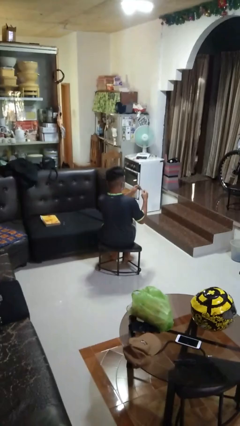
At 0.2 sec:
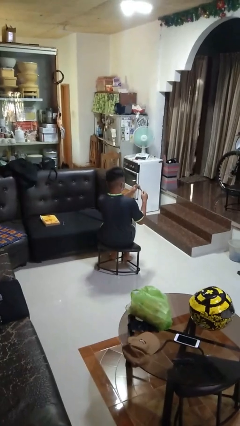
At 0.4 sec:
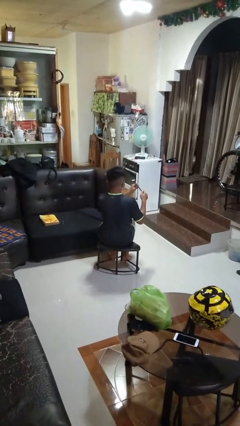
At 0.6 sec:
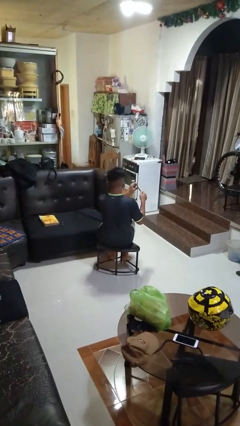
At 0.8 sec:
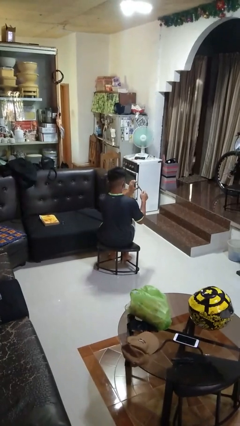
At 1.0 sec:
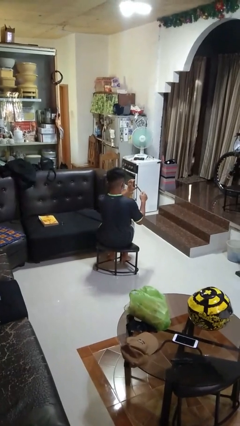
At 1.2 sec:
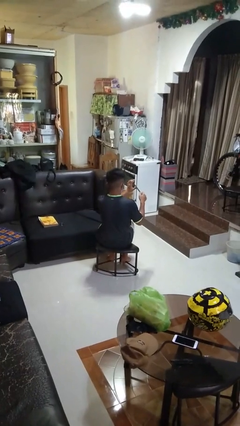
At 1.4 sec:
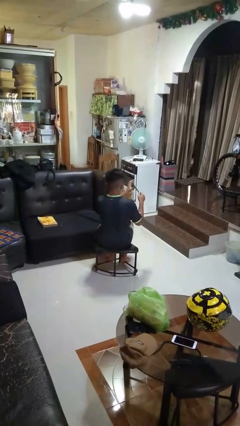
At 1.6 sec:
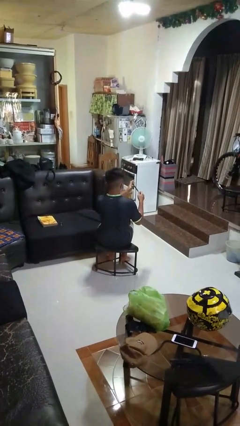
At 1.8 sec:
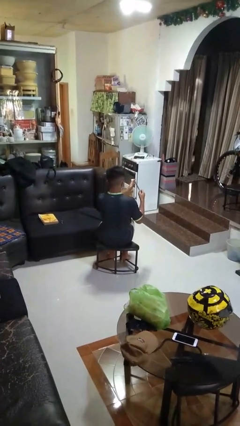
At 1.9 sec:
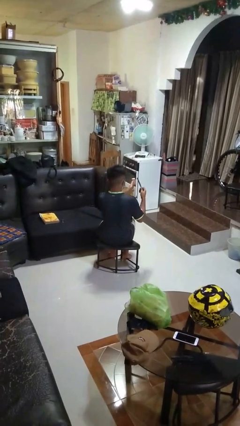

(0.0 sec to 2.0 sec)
person files fingernails

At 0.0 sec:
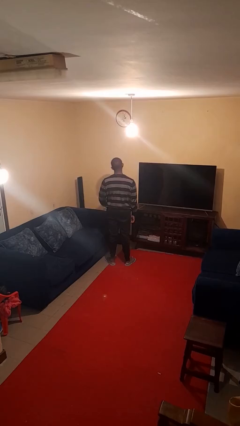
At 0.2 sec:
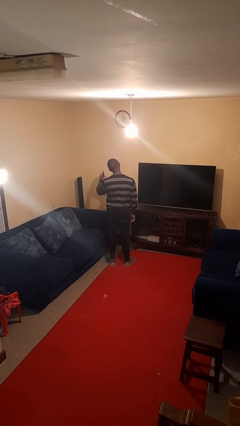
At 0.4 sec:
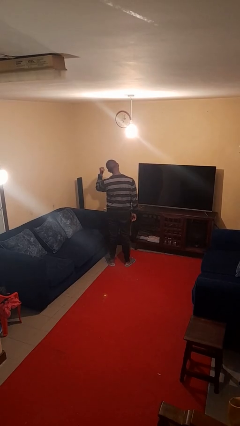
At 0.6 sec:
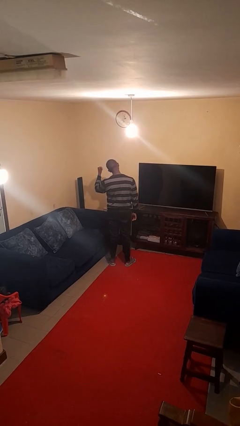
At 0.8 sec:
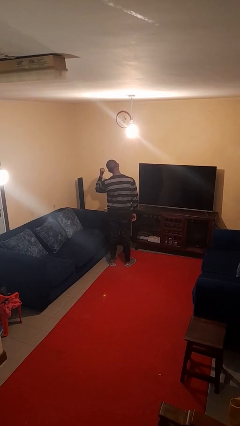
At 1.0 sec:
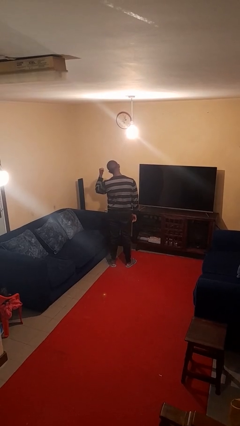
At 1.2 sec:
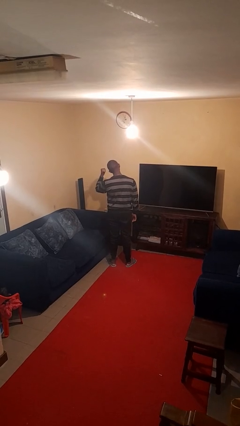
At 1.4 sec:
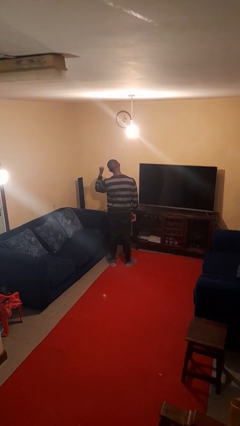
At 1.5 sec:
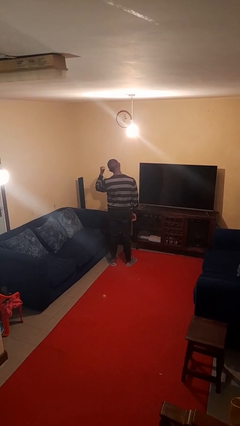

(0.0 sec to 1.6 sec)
person gestures behind me

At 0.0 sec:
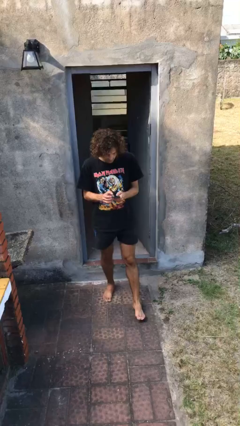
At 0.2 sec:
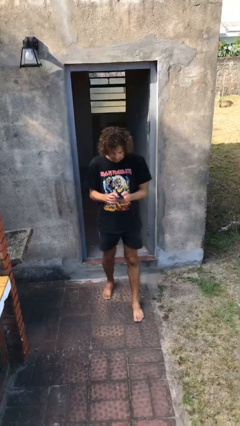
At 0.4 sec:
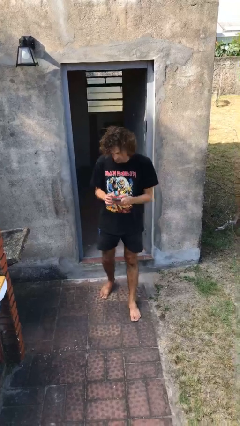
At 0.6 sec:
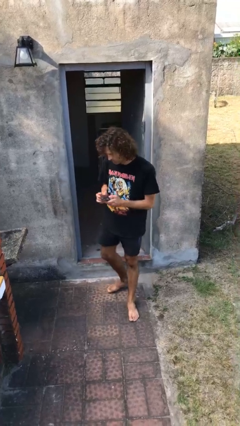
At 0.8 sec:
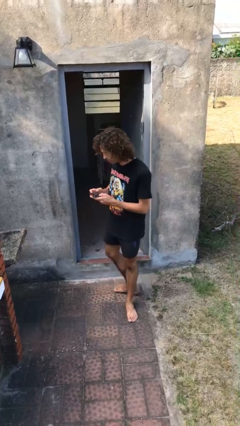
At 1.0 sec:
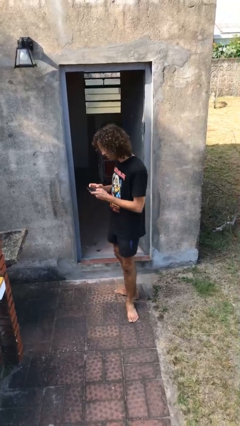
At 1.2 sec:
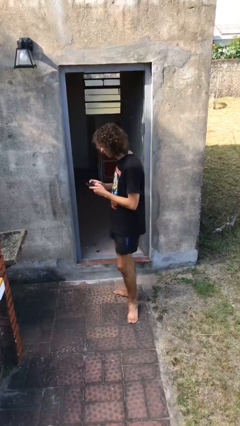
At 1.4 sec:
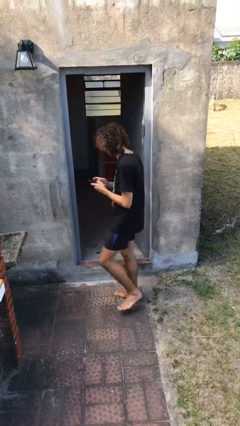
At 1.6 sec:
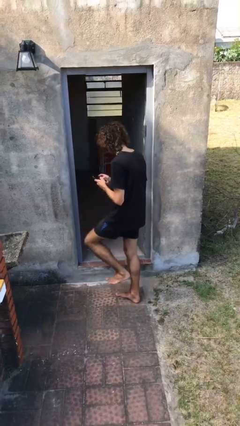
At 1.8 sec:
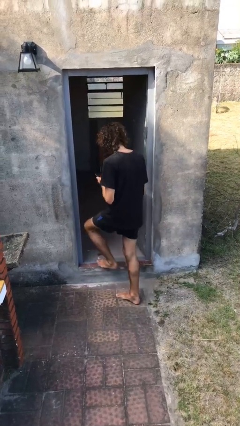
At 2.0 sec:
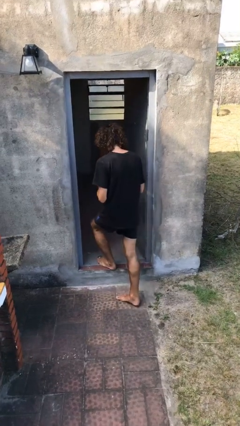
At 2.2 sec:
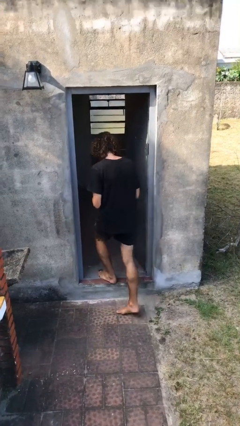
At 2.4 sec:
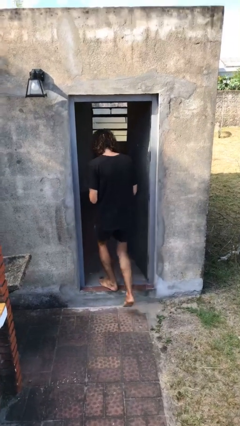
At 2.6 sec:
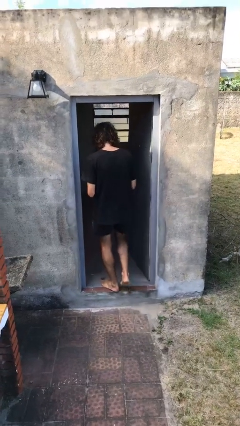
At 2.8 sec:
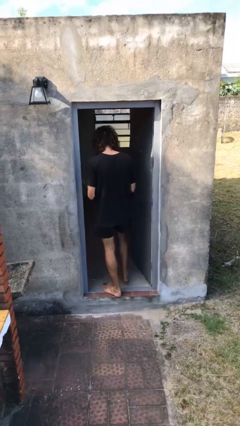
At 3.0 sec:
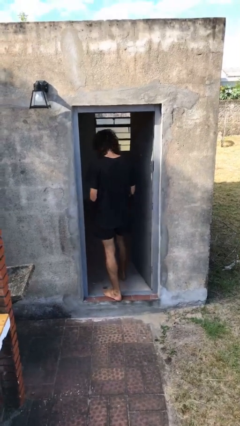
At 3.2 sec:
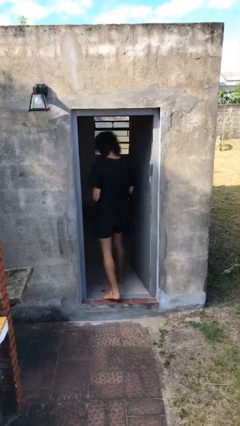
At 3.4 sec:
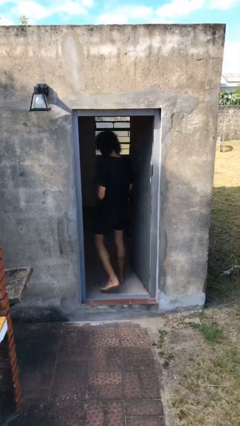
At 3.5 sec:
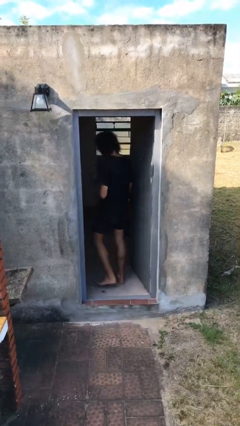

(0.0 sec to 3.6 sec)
person exits scene through structure

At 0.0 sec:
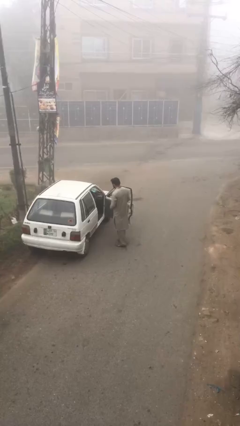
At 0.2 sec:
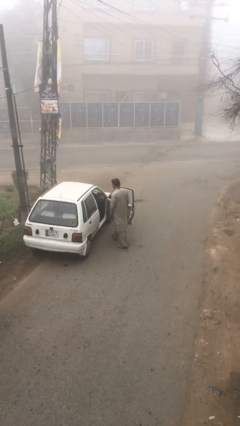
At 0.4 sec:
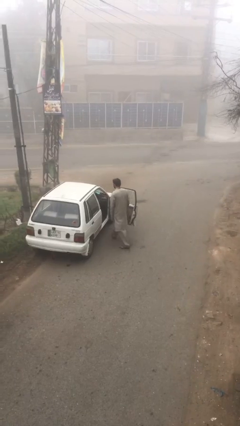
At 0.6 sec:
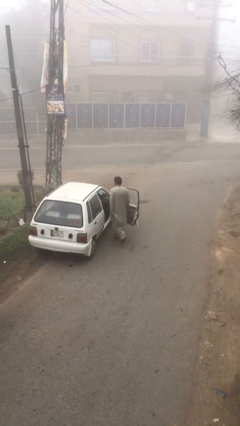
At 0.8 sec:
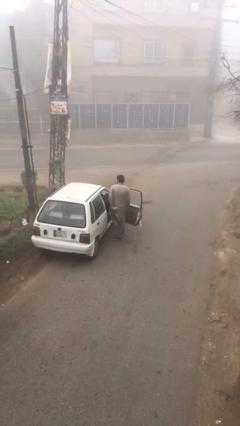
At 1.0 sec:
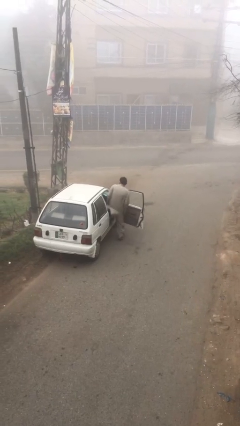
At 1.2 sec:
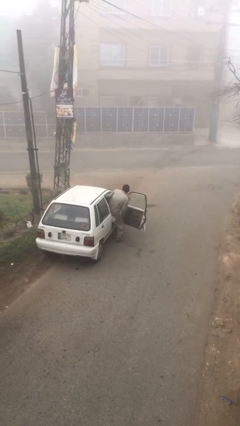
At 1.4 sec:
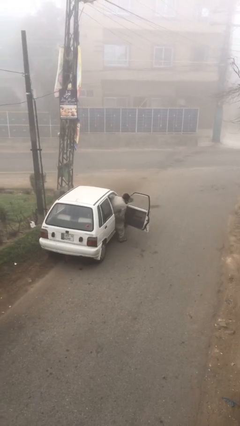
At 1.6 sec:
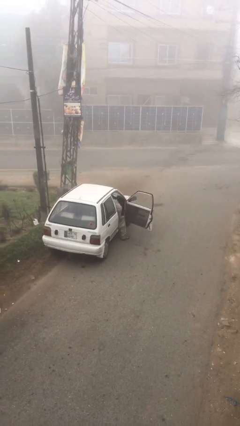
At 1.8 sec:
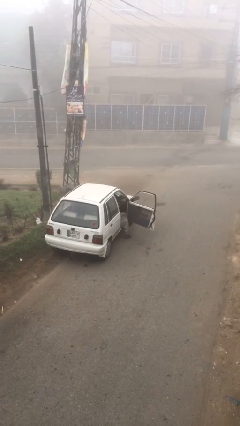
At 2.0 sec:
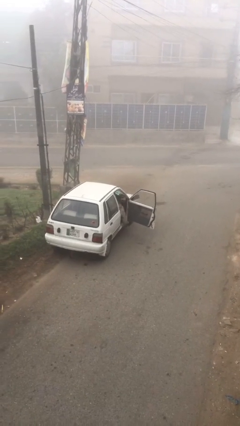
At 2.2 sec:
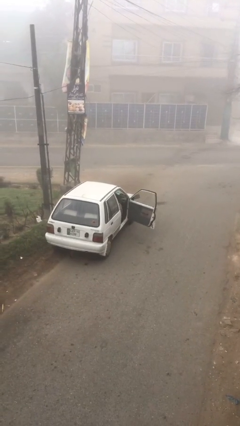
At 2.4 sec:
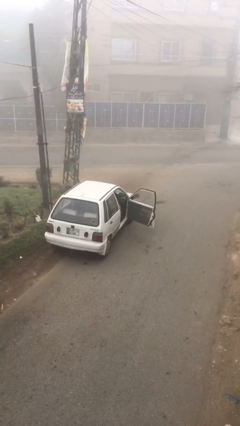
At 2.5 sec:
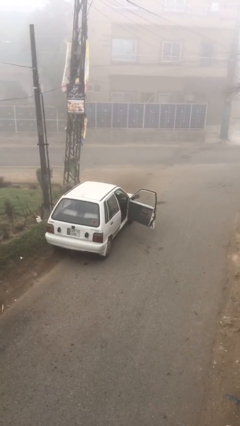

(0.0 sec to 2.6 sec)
person enters car

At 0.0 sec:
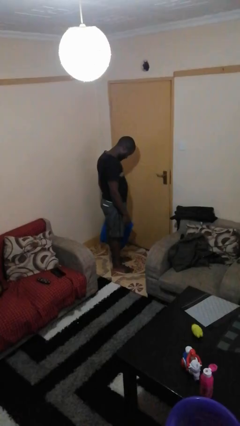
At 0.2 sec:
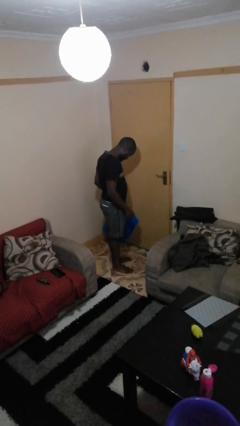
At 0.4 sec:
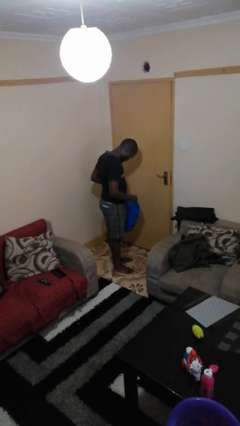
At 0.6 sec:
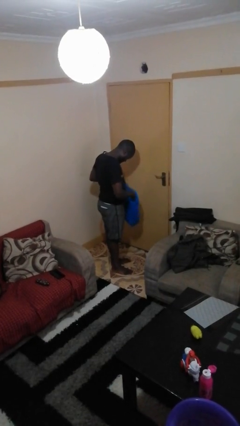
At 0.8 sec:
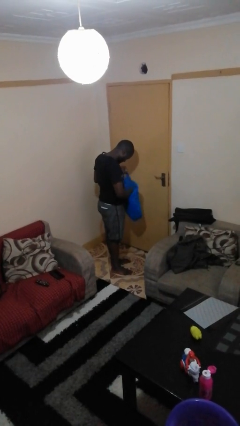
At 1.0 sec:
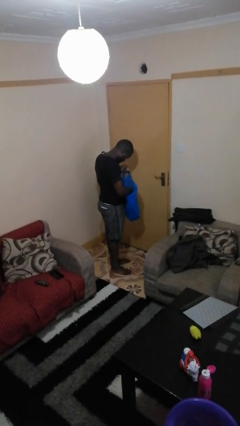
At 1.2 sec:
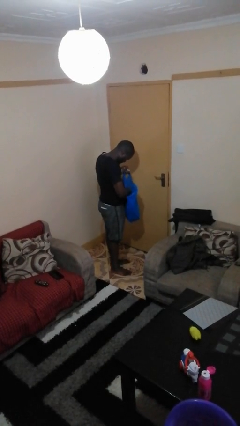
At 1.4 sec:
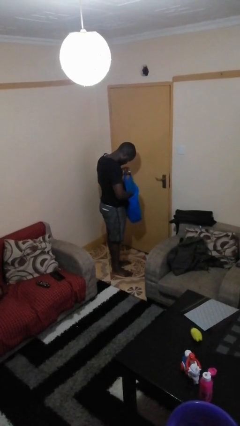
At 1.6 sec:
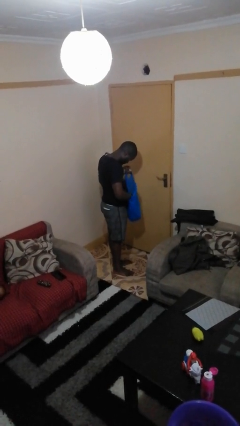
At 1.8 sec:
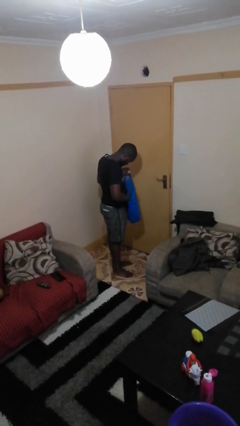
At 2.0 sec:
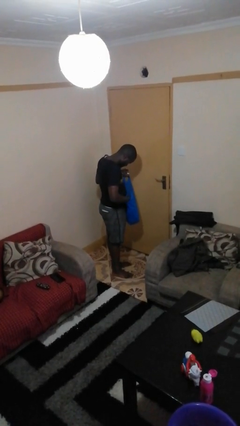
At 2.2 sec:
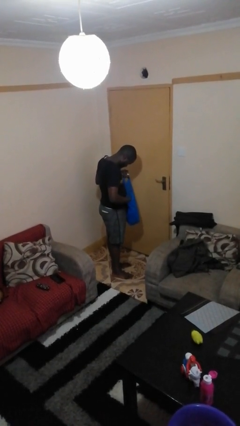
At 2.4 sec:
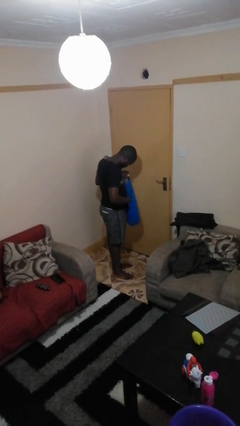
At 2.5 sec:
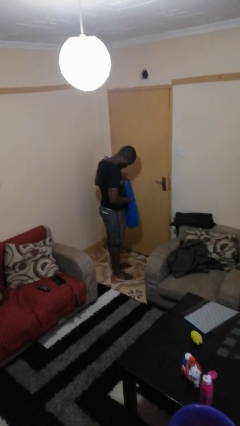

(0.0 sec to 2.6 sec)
person searches in bag

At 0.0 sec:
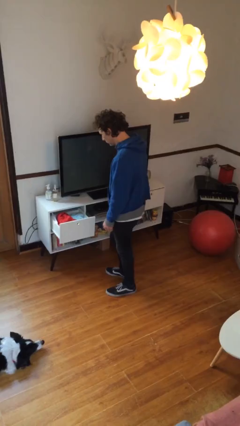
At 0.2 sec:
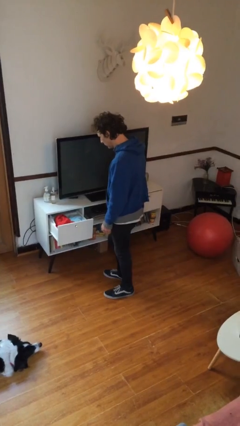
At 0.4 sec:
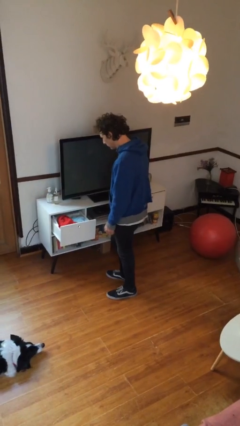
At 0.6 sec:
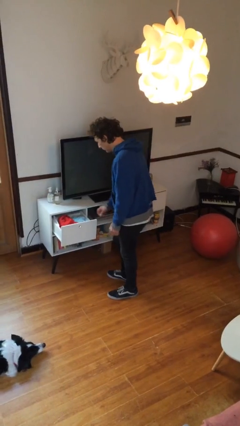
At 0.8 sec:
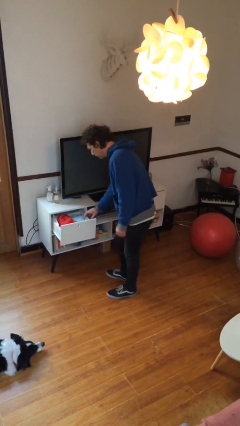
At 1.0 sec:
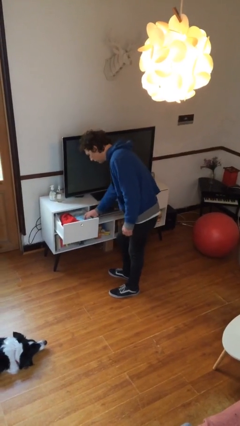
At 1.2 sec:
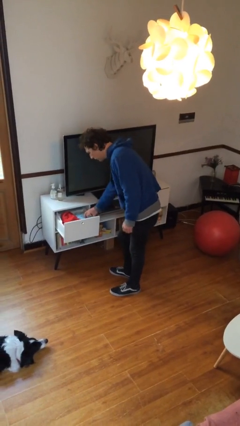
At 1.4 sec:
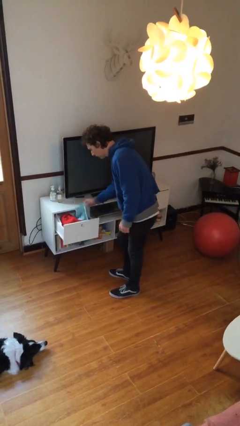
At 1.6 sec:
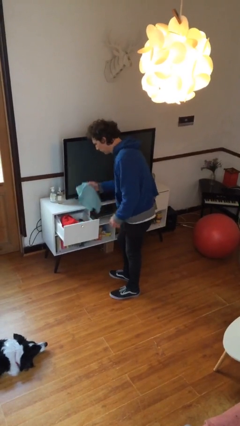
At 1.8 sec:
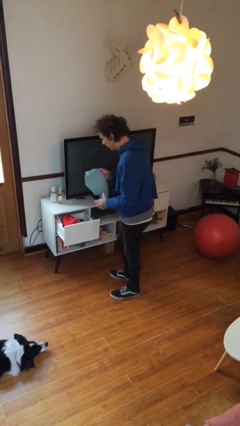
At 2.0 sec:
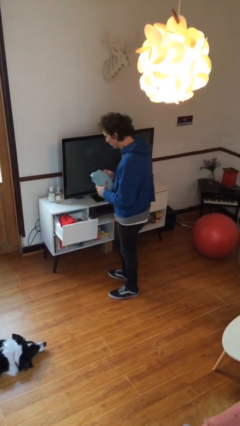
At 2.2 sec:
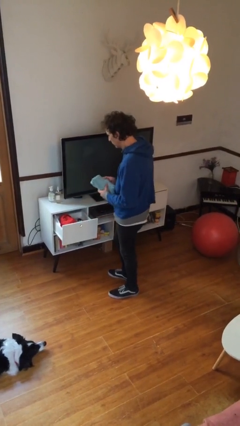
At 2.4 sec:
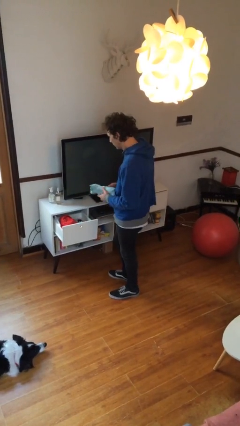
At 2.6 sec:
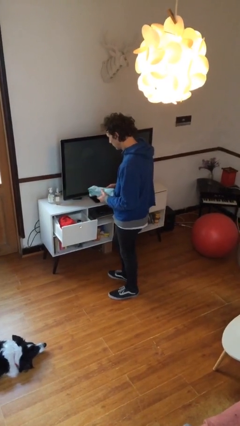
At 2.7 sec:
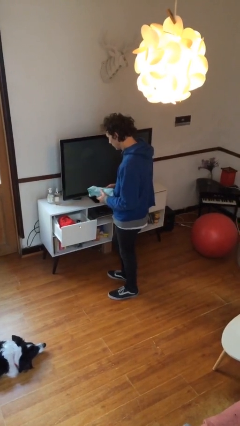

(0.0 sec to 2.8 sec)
person takes clothes from dresser

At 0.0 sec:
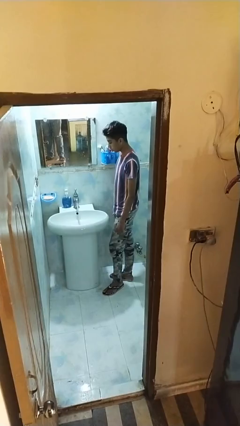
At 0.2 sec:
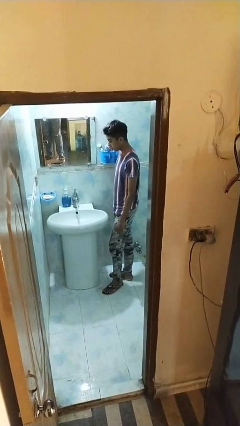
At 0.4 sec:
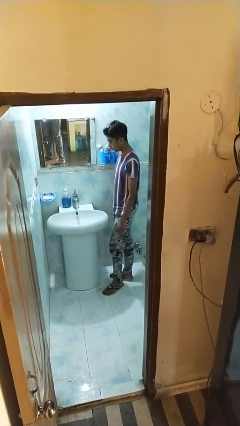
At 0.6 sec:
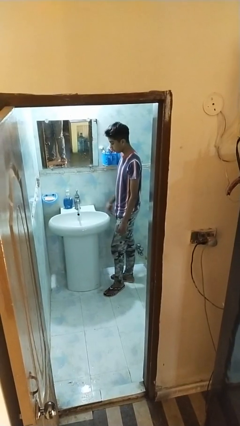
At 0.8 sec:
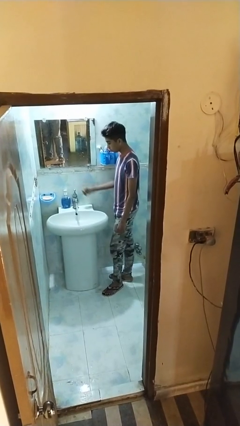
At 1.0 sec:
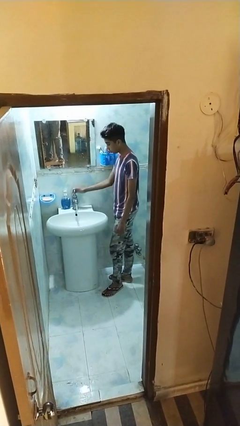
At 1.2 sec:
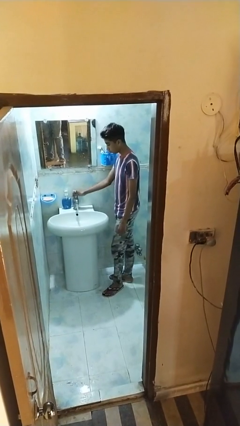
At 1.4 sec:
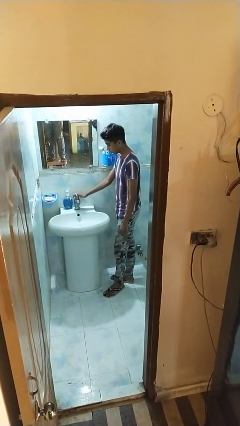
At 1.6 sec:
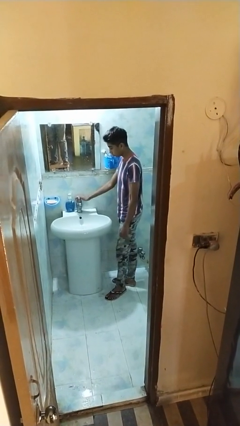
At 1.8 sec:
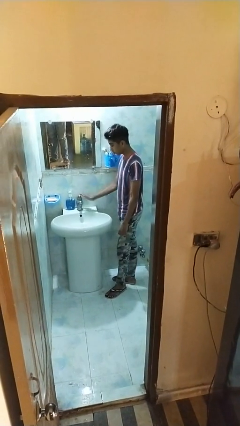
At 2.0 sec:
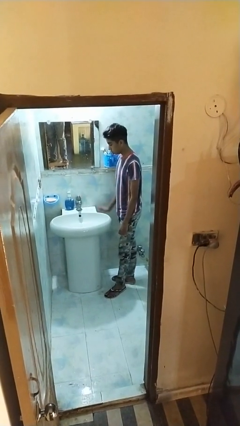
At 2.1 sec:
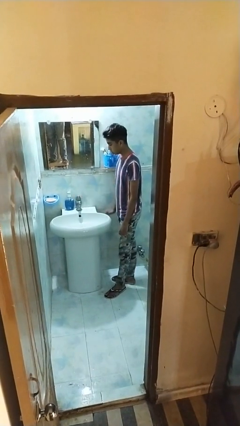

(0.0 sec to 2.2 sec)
person turns off faucet
